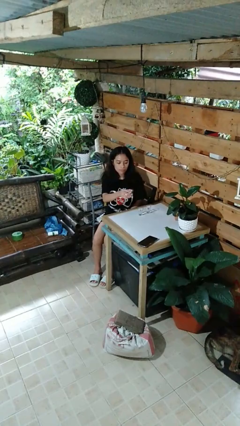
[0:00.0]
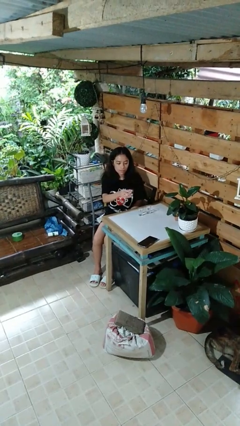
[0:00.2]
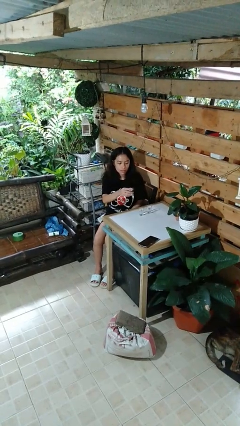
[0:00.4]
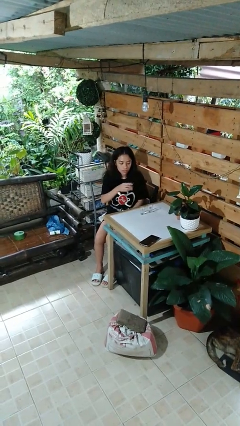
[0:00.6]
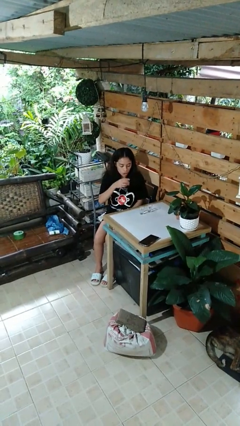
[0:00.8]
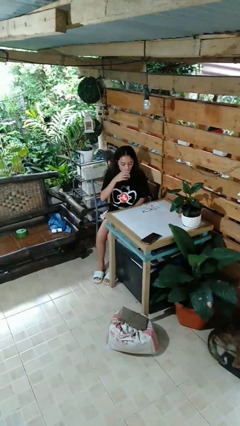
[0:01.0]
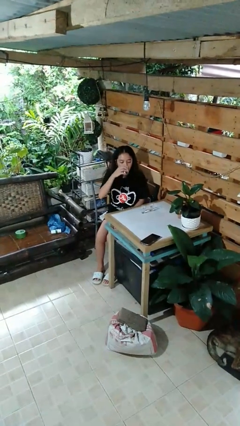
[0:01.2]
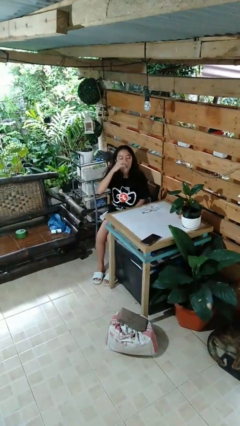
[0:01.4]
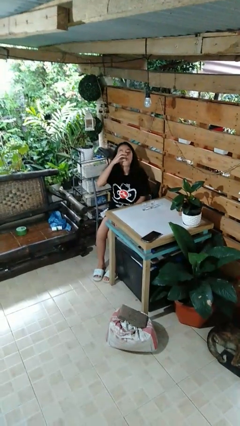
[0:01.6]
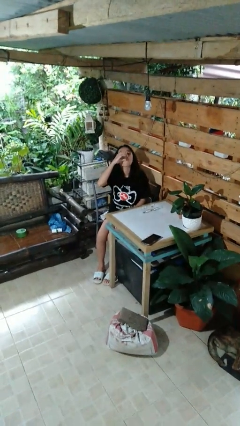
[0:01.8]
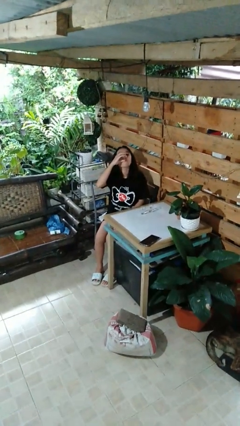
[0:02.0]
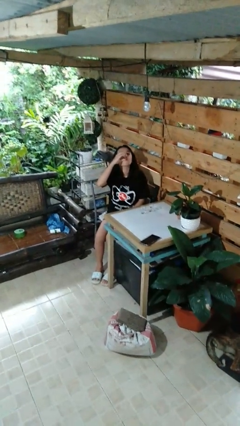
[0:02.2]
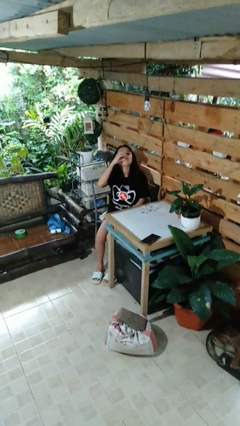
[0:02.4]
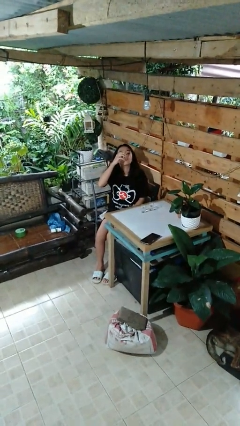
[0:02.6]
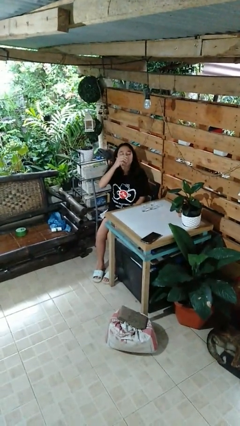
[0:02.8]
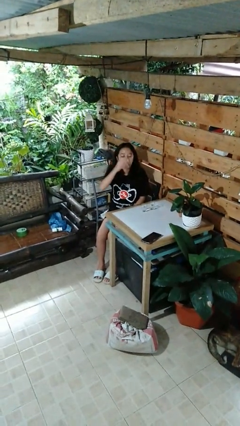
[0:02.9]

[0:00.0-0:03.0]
person drinks from shotglass

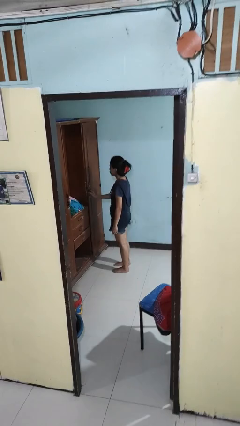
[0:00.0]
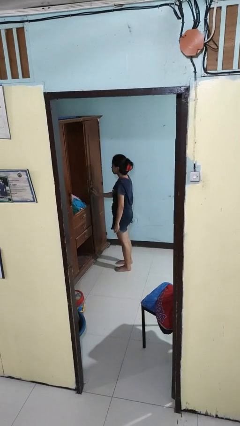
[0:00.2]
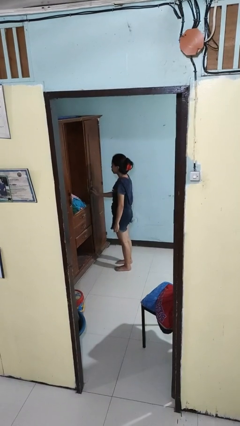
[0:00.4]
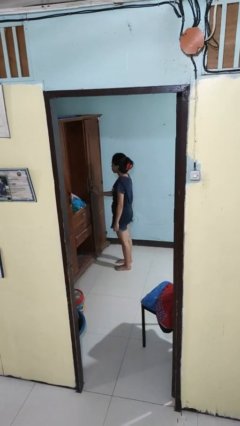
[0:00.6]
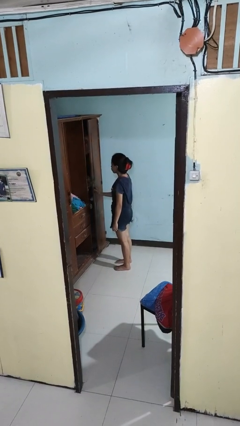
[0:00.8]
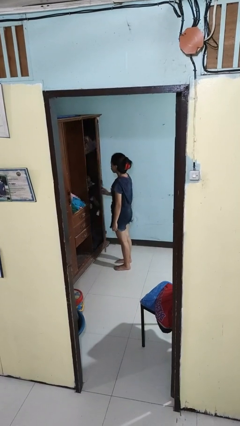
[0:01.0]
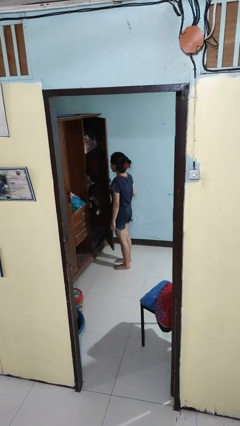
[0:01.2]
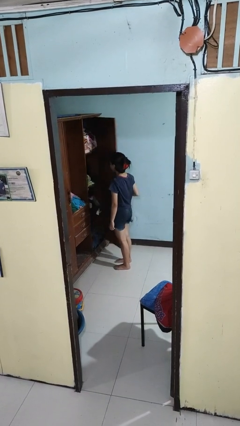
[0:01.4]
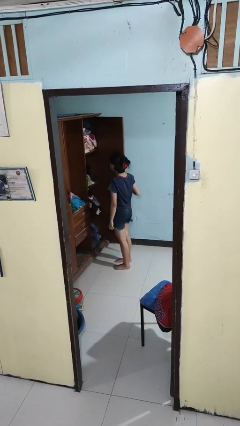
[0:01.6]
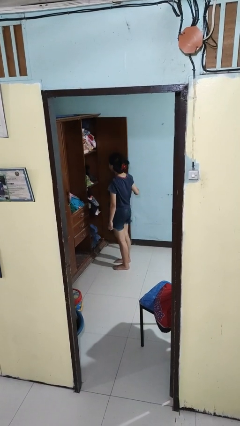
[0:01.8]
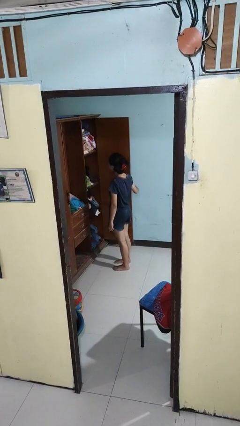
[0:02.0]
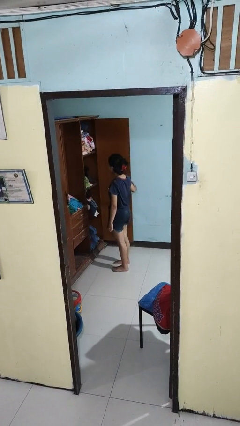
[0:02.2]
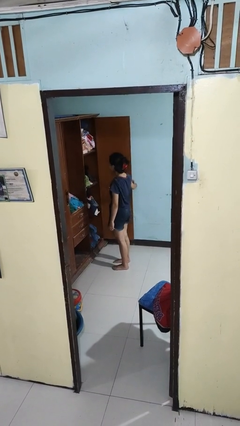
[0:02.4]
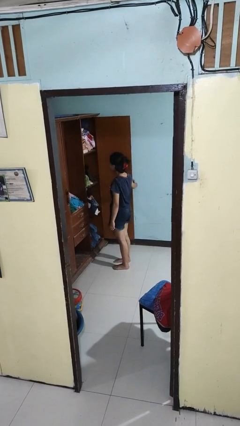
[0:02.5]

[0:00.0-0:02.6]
person opens closet door

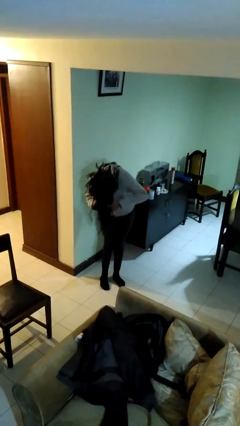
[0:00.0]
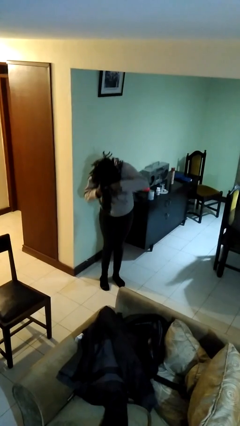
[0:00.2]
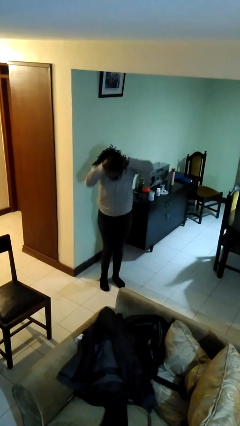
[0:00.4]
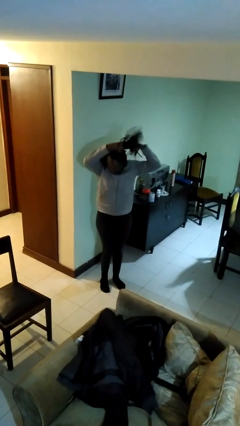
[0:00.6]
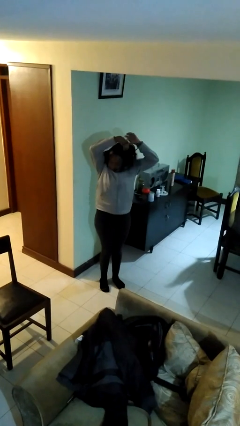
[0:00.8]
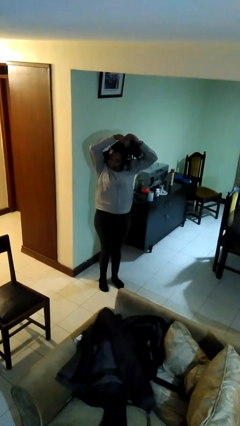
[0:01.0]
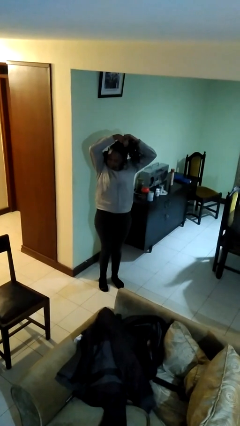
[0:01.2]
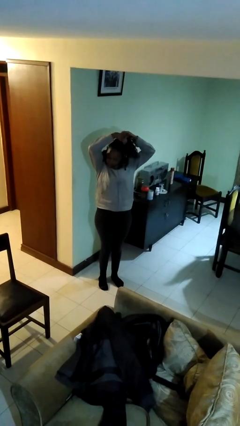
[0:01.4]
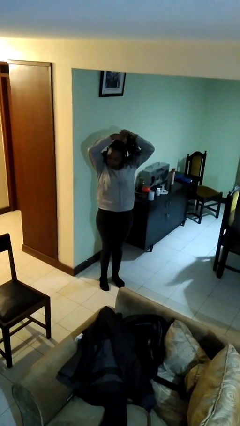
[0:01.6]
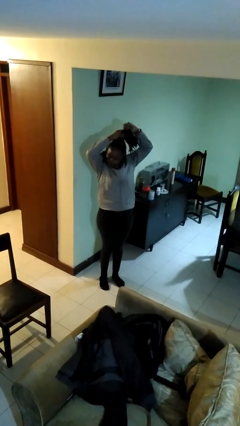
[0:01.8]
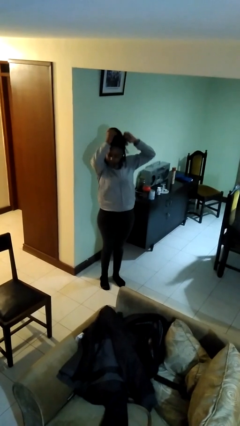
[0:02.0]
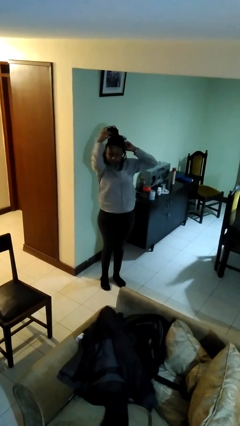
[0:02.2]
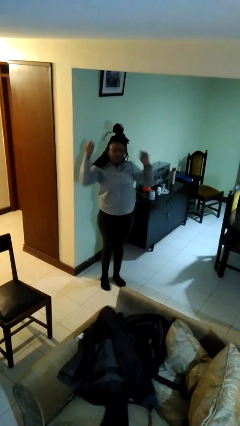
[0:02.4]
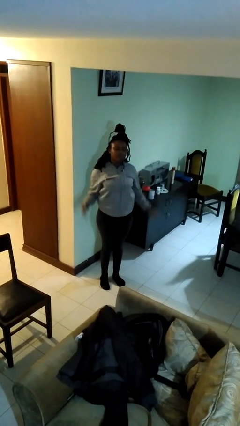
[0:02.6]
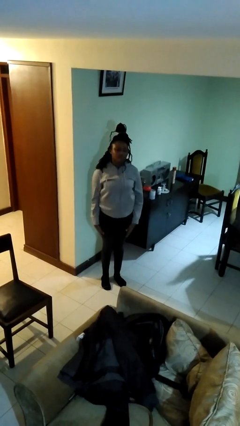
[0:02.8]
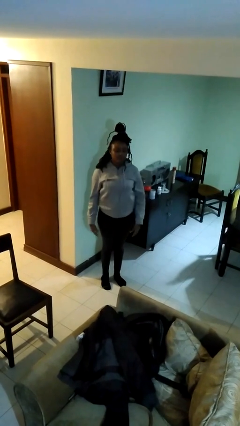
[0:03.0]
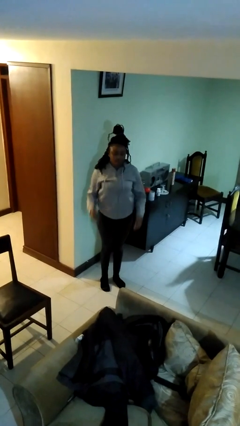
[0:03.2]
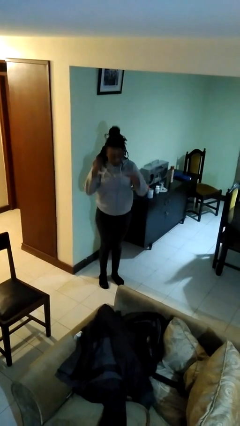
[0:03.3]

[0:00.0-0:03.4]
person puts hair in ponytail

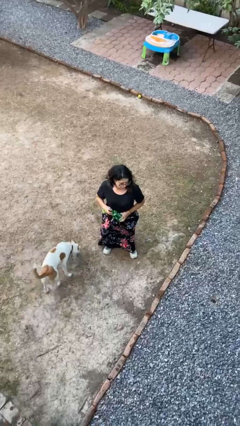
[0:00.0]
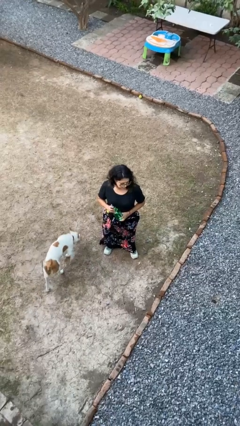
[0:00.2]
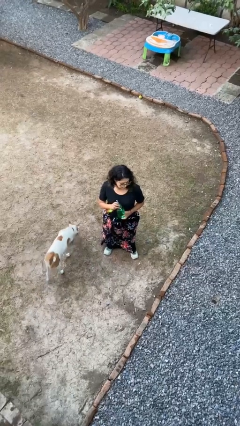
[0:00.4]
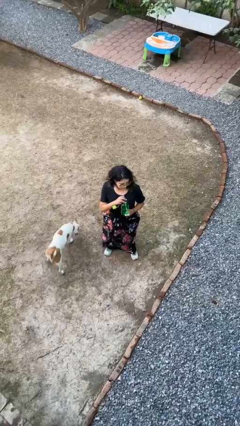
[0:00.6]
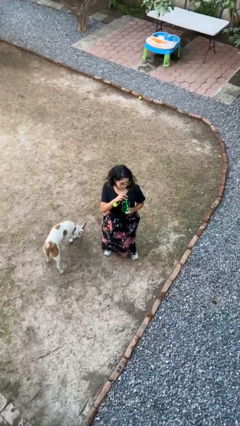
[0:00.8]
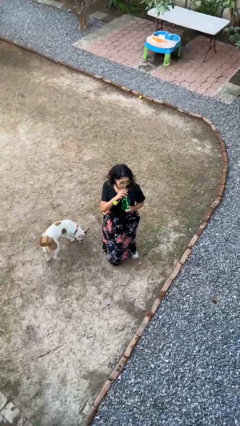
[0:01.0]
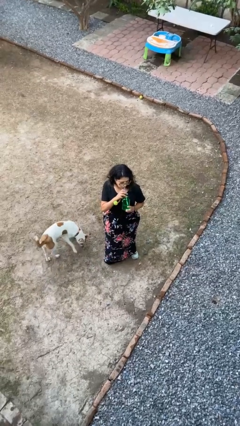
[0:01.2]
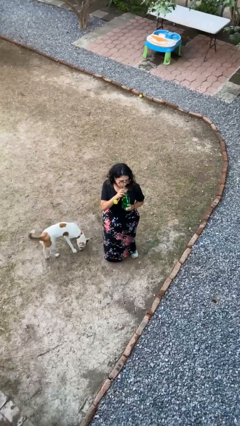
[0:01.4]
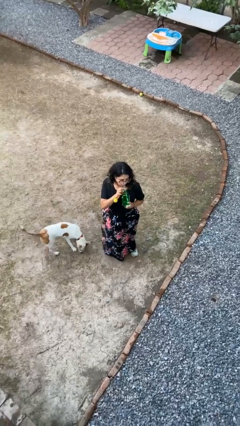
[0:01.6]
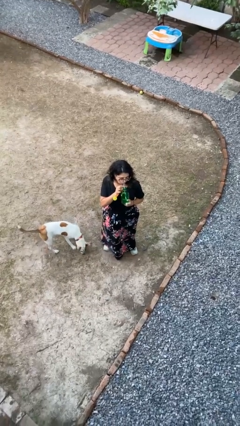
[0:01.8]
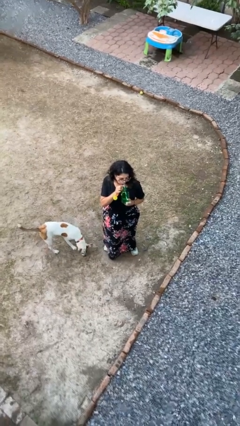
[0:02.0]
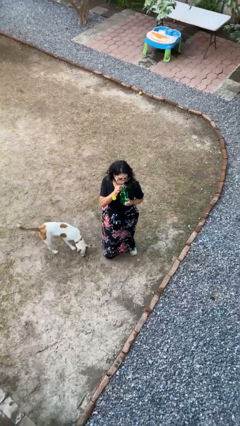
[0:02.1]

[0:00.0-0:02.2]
person drinks from straw

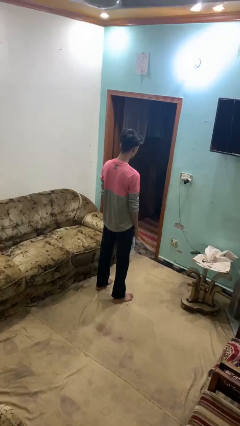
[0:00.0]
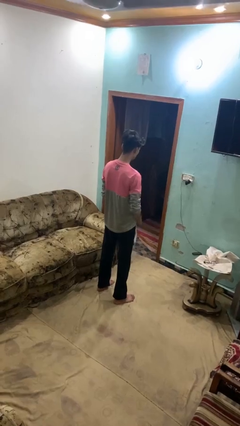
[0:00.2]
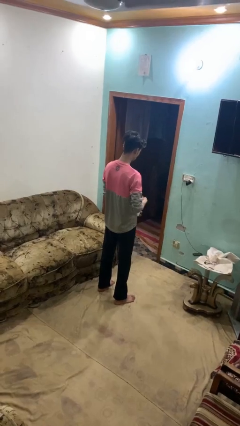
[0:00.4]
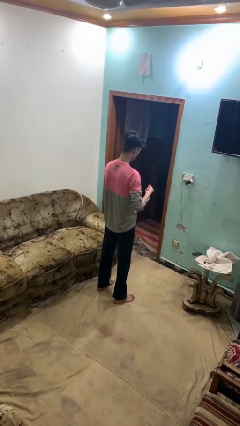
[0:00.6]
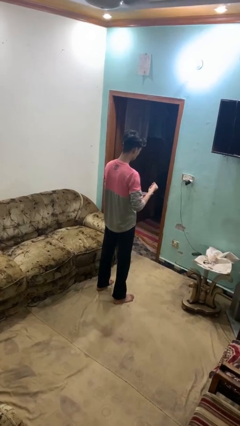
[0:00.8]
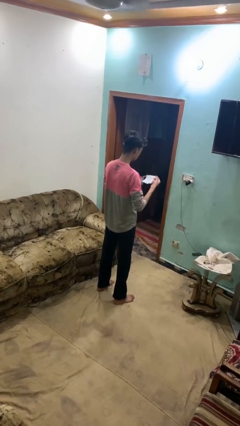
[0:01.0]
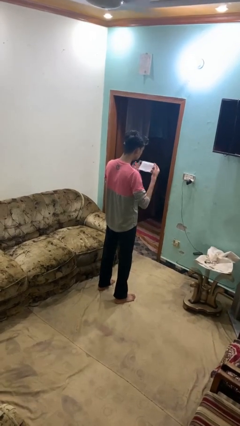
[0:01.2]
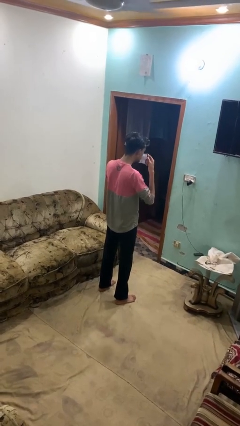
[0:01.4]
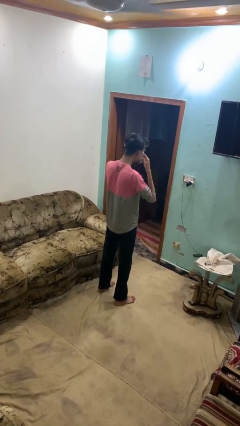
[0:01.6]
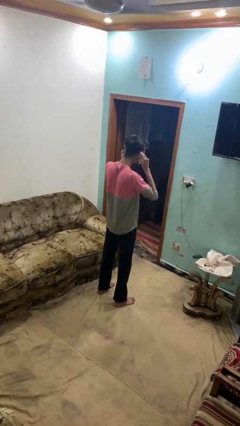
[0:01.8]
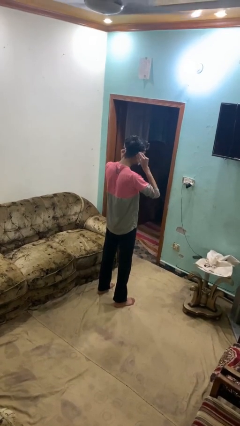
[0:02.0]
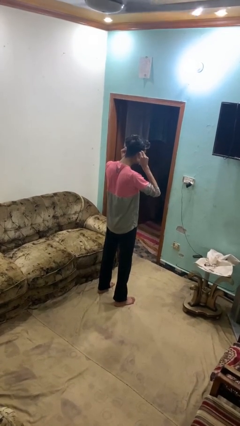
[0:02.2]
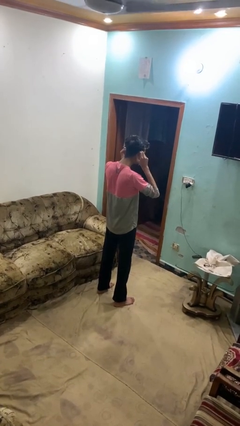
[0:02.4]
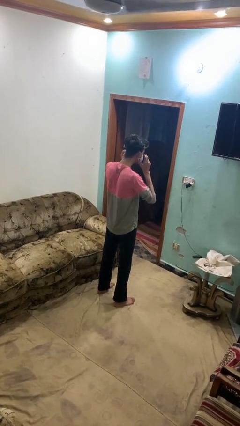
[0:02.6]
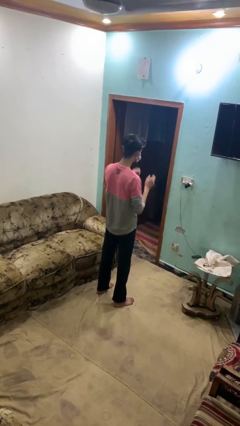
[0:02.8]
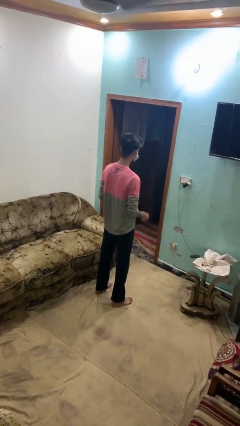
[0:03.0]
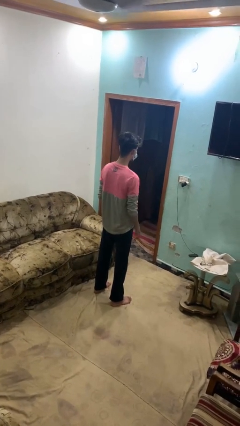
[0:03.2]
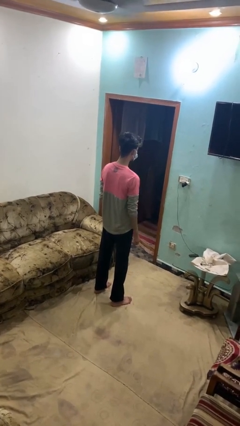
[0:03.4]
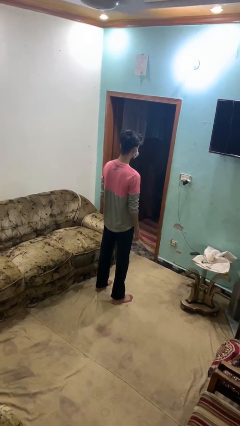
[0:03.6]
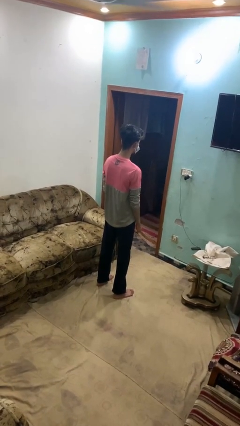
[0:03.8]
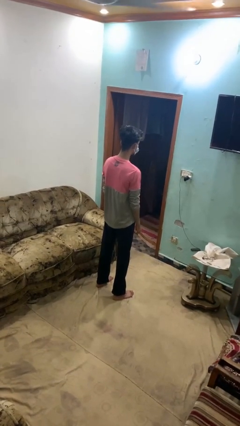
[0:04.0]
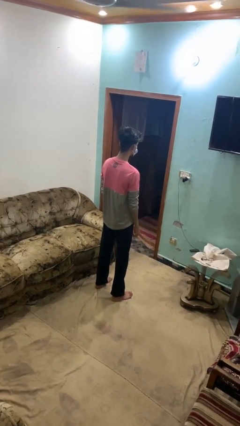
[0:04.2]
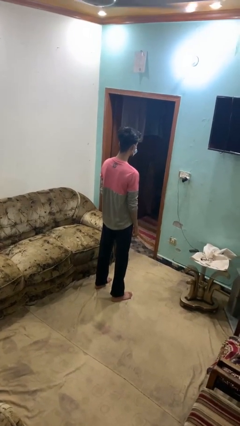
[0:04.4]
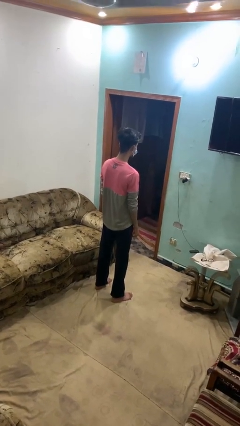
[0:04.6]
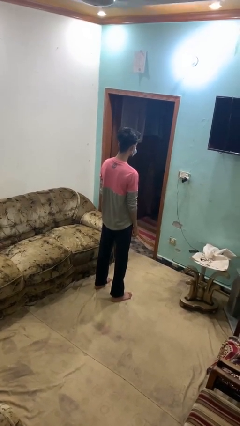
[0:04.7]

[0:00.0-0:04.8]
person puts on facemask

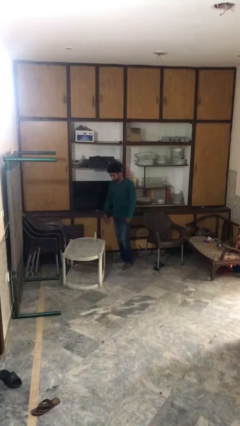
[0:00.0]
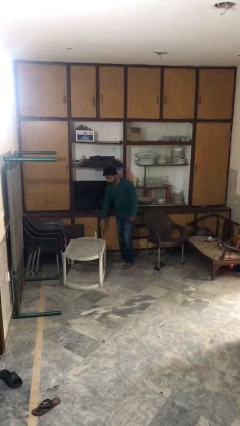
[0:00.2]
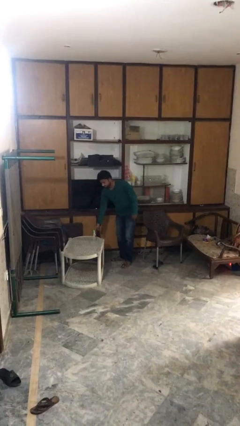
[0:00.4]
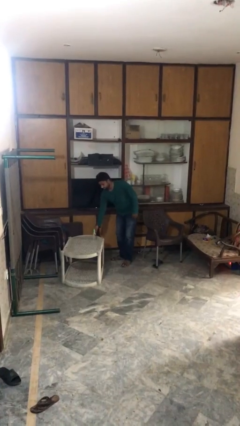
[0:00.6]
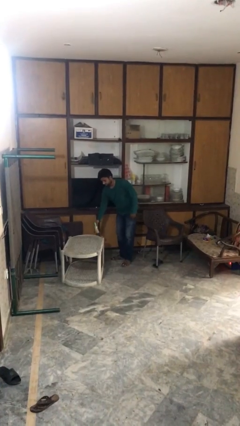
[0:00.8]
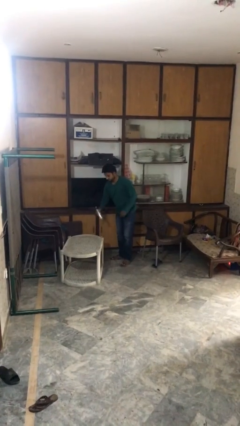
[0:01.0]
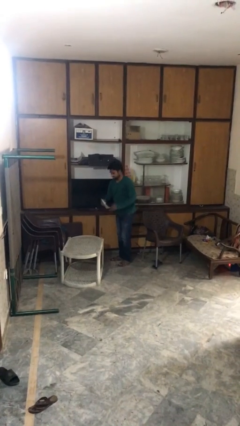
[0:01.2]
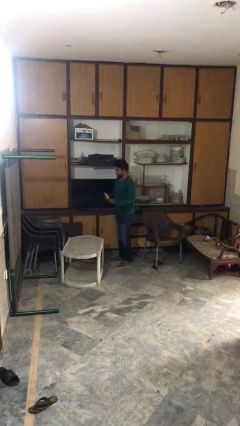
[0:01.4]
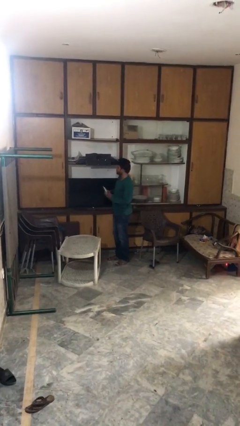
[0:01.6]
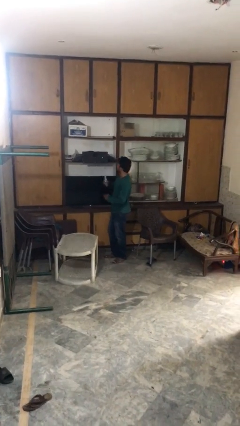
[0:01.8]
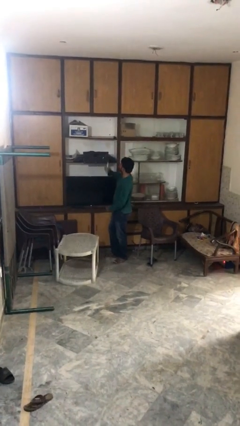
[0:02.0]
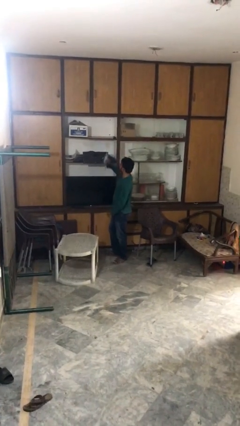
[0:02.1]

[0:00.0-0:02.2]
person picks up object from table
